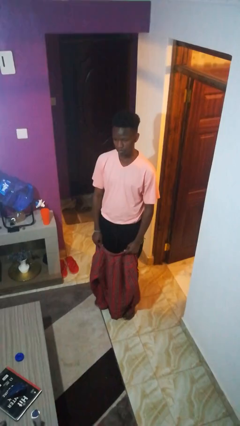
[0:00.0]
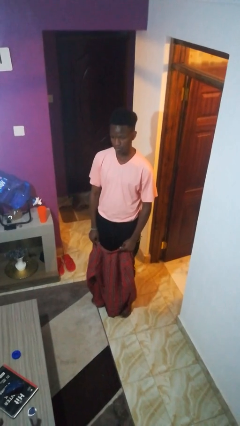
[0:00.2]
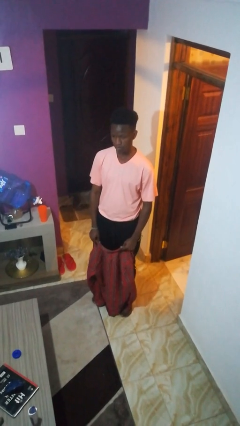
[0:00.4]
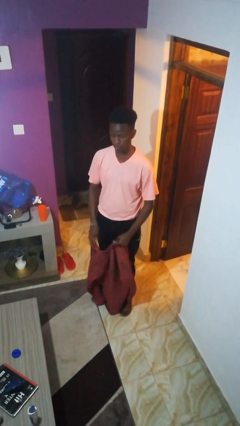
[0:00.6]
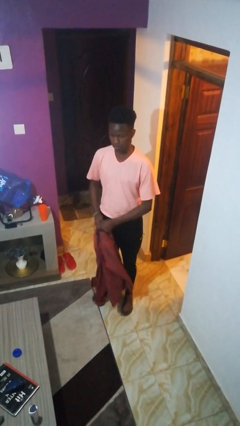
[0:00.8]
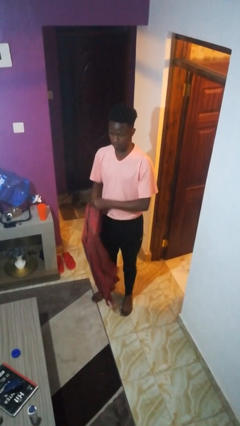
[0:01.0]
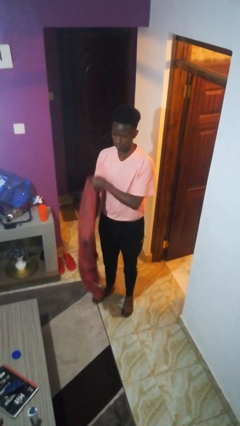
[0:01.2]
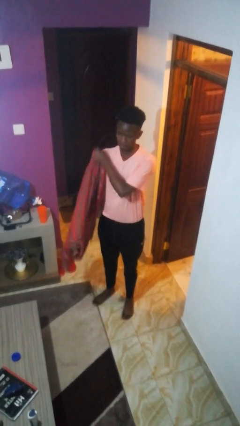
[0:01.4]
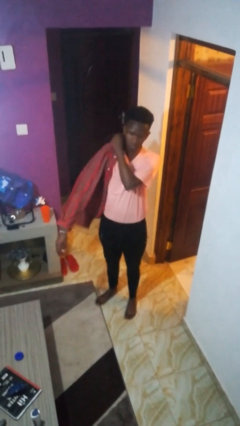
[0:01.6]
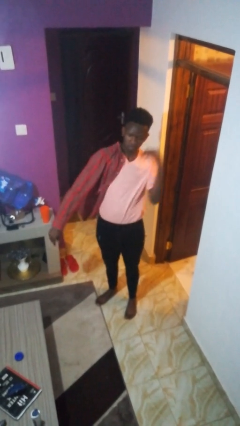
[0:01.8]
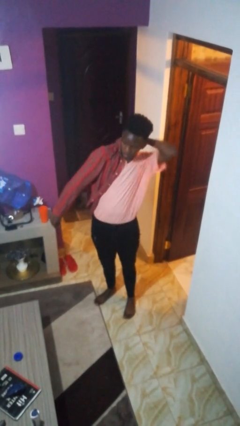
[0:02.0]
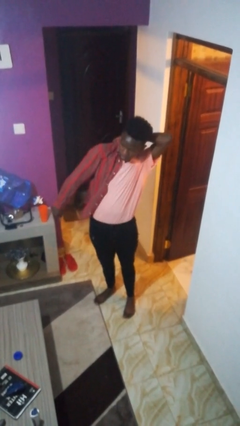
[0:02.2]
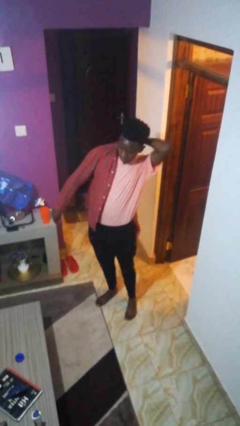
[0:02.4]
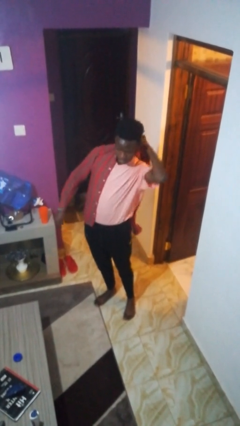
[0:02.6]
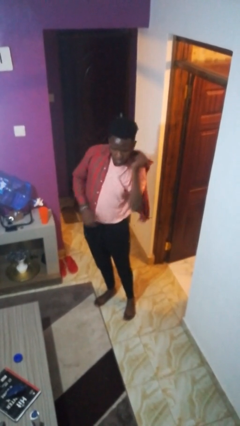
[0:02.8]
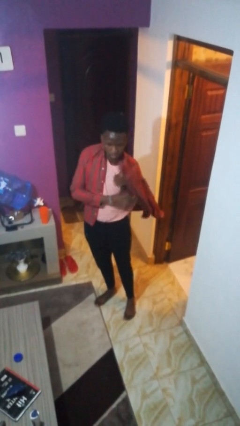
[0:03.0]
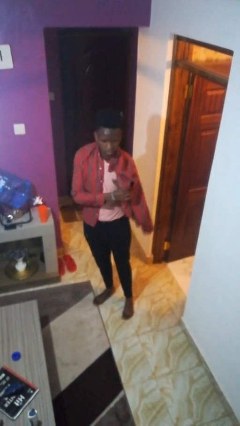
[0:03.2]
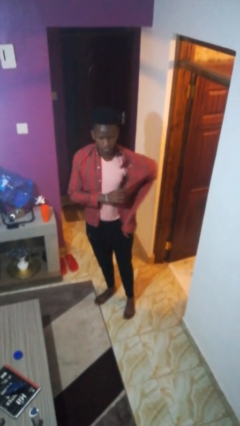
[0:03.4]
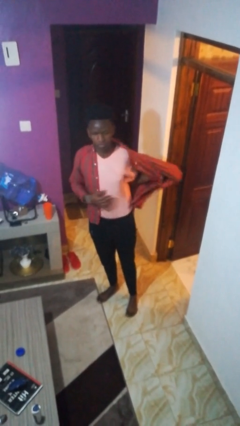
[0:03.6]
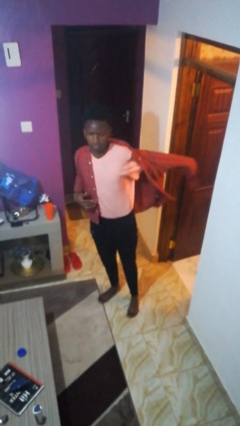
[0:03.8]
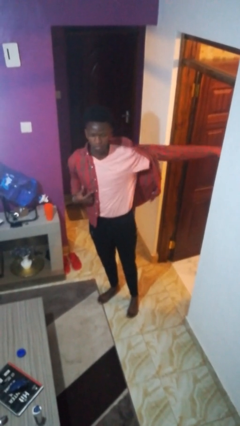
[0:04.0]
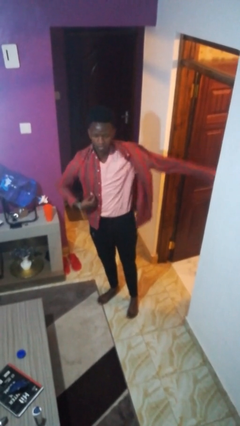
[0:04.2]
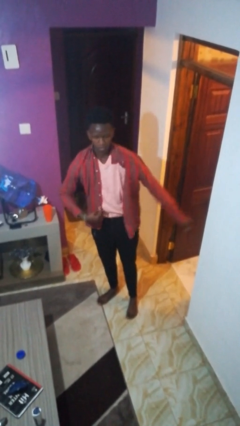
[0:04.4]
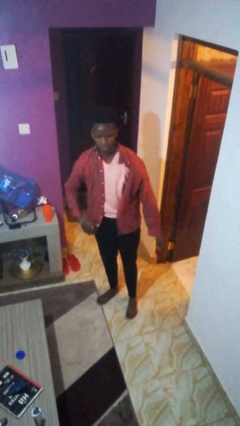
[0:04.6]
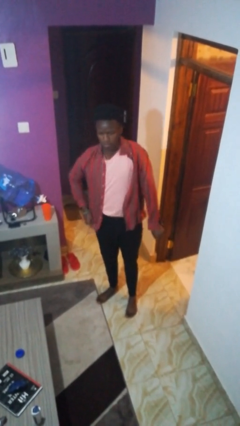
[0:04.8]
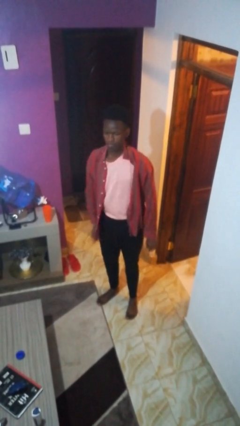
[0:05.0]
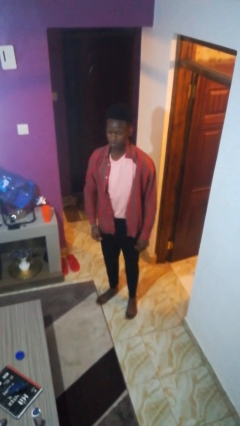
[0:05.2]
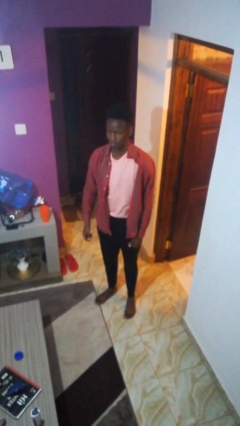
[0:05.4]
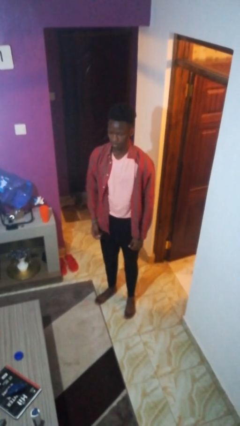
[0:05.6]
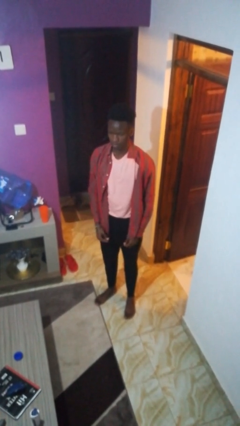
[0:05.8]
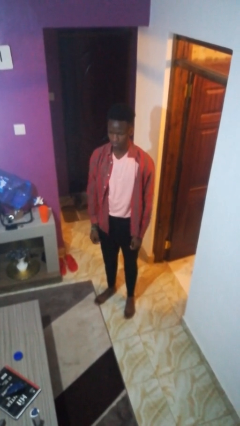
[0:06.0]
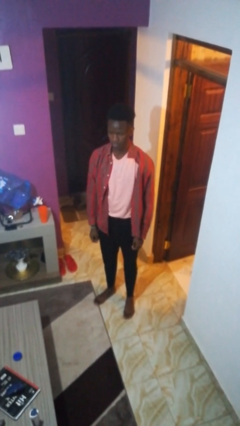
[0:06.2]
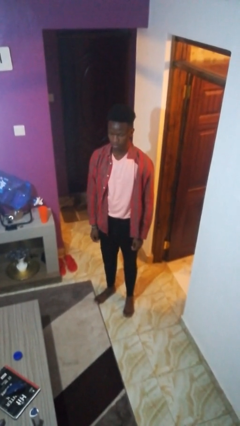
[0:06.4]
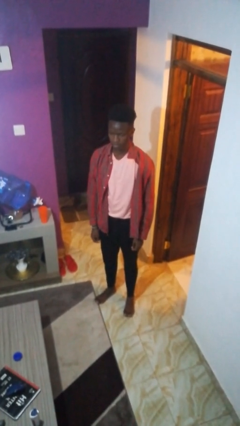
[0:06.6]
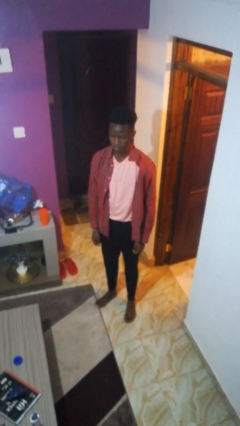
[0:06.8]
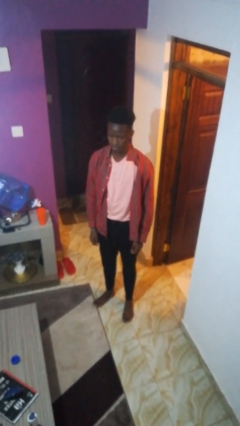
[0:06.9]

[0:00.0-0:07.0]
person puts on shirt

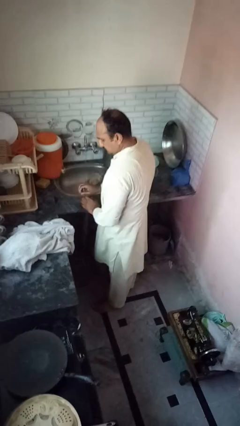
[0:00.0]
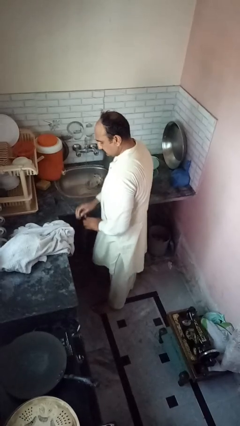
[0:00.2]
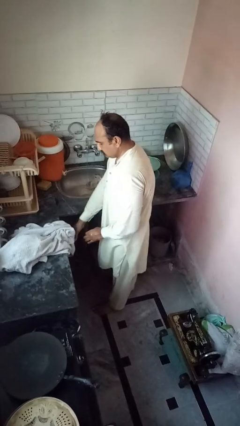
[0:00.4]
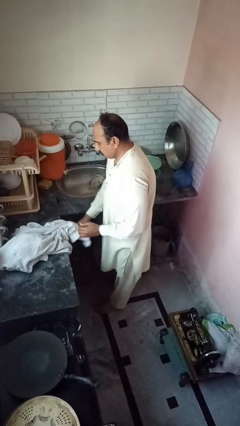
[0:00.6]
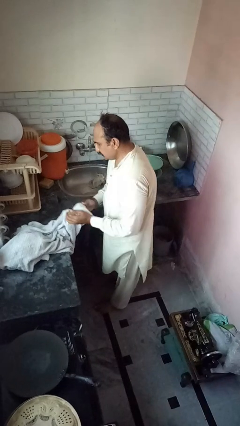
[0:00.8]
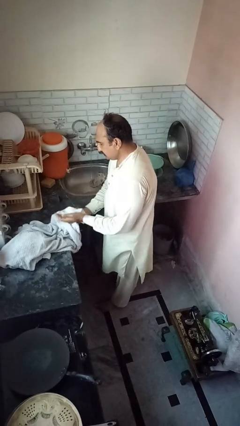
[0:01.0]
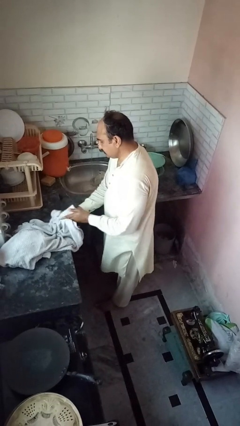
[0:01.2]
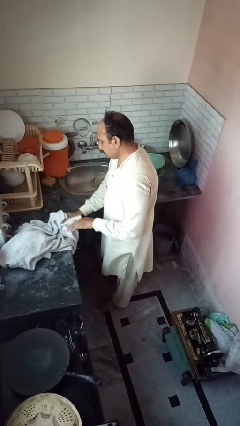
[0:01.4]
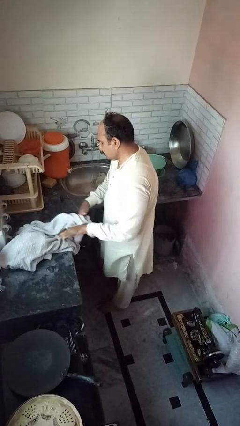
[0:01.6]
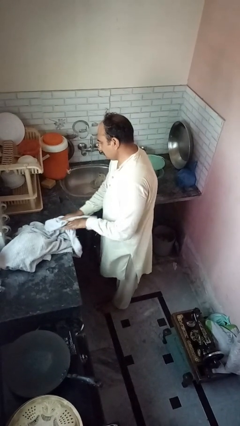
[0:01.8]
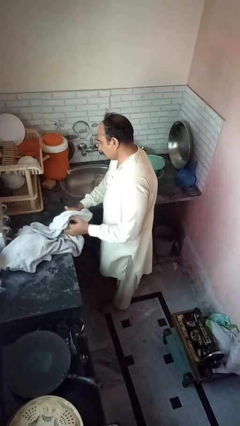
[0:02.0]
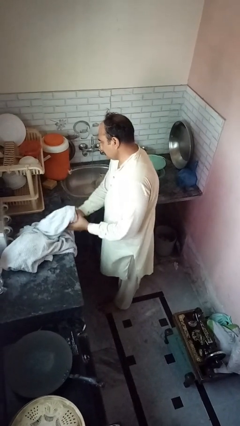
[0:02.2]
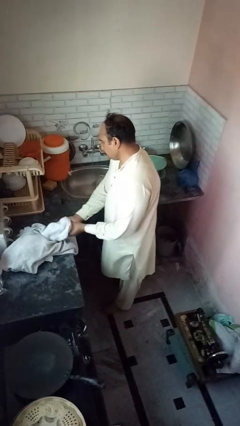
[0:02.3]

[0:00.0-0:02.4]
person dries hands with towel

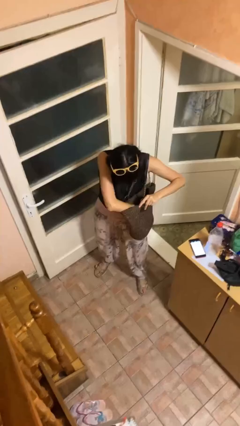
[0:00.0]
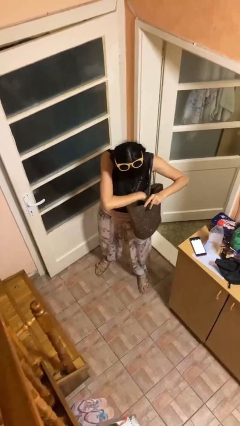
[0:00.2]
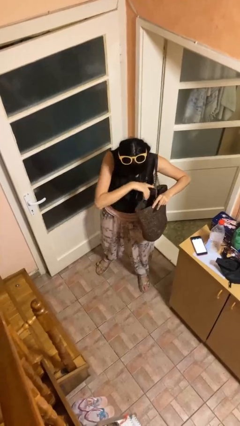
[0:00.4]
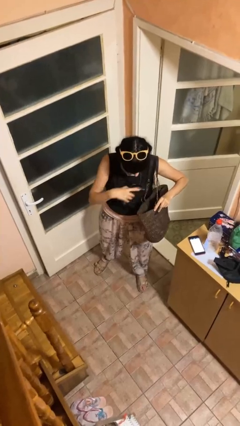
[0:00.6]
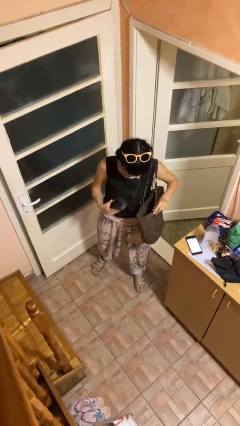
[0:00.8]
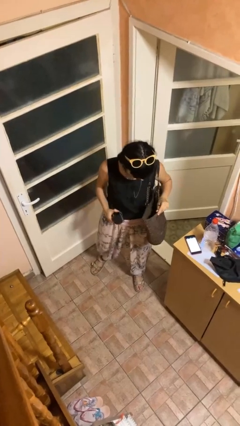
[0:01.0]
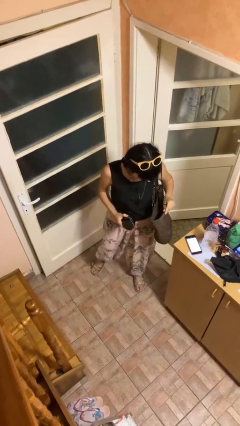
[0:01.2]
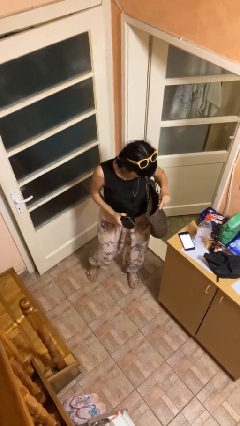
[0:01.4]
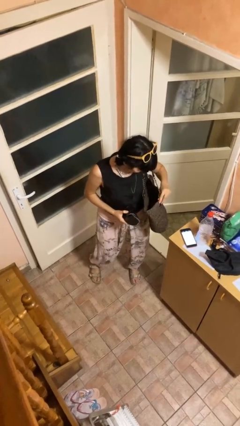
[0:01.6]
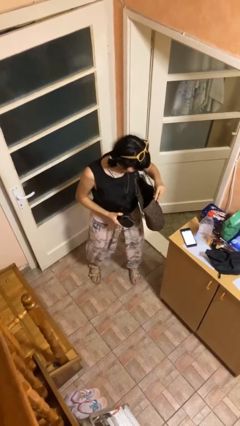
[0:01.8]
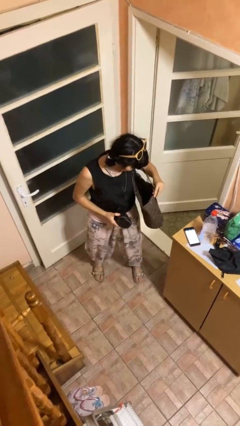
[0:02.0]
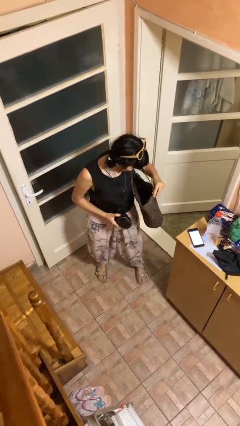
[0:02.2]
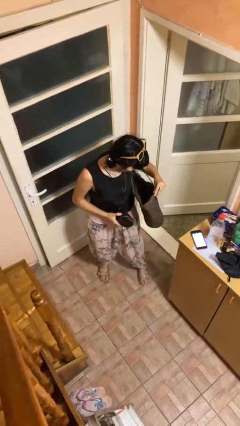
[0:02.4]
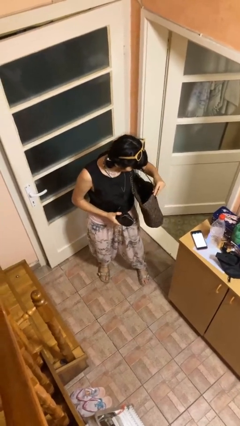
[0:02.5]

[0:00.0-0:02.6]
person takes object from purse

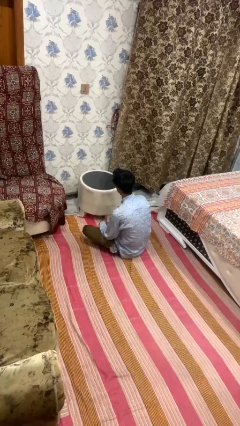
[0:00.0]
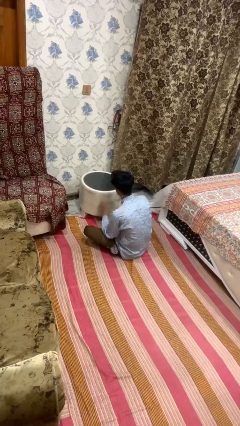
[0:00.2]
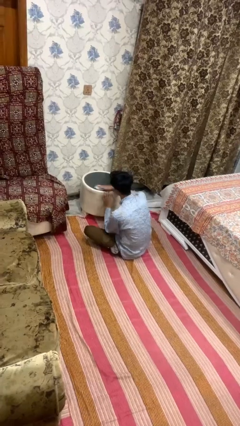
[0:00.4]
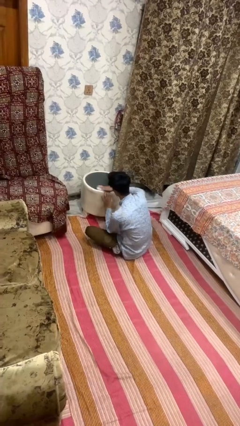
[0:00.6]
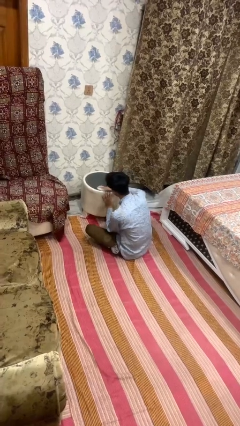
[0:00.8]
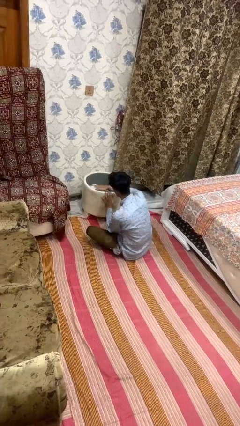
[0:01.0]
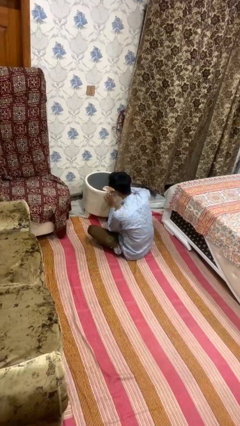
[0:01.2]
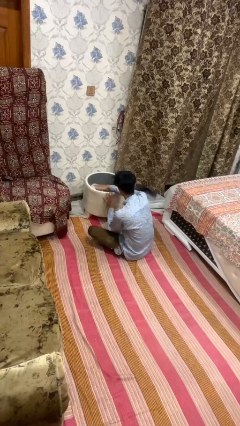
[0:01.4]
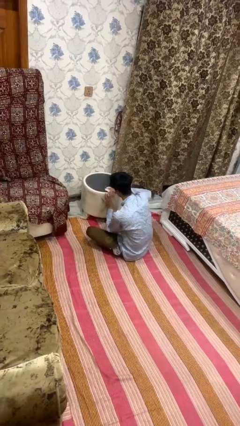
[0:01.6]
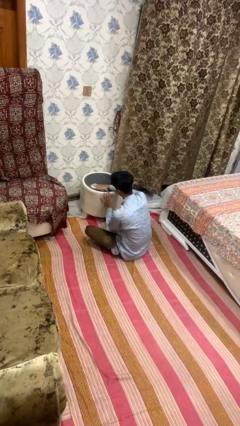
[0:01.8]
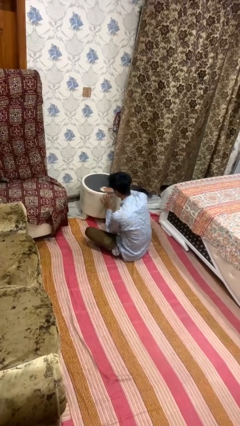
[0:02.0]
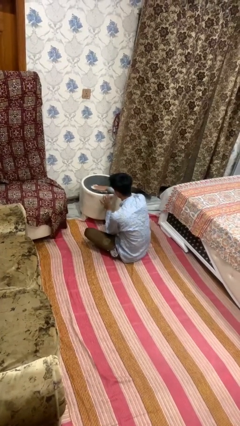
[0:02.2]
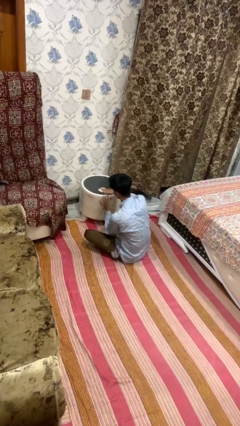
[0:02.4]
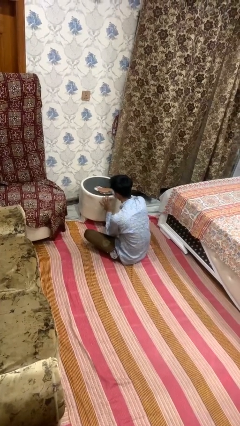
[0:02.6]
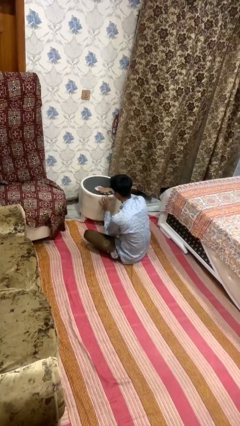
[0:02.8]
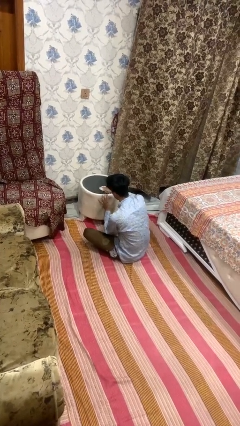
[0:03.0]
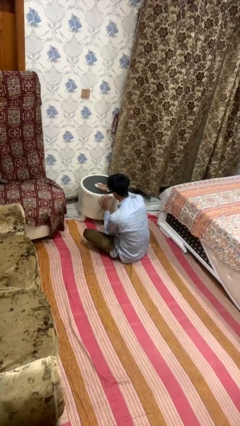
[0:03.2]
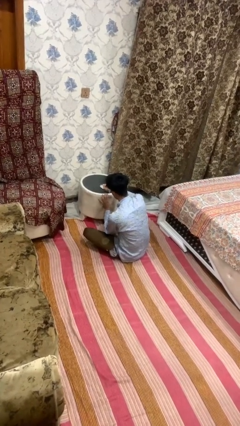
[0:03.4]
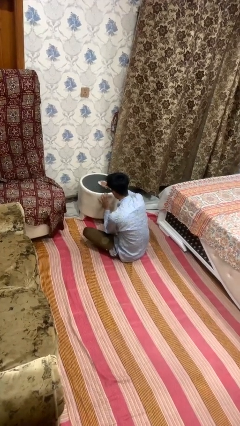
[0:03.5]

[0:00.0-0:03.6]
person cleans table with rag

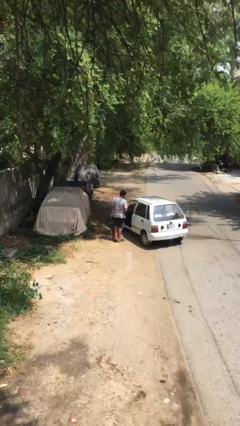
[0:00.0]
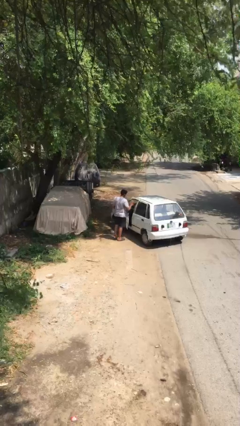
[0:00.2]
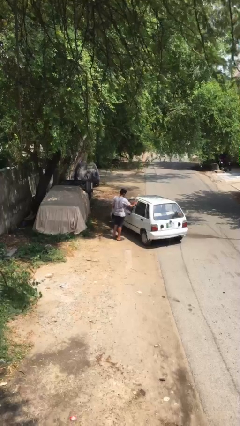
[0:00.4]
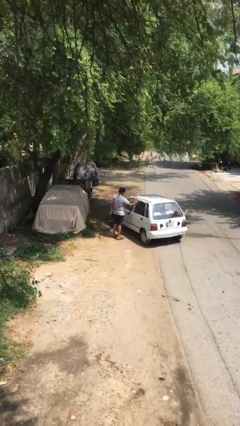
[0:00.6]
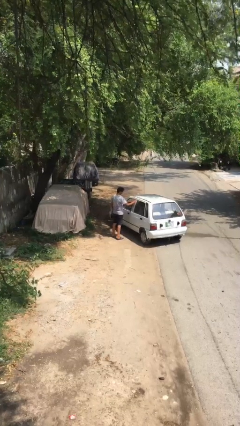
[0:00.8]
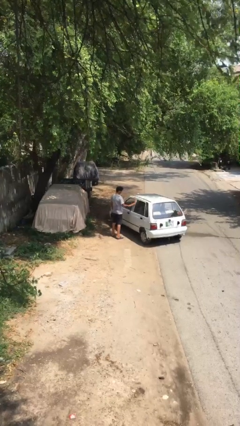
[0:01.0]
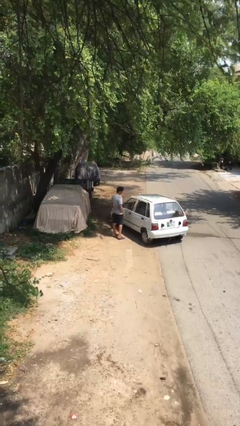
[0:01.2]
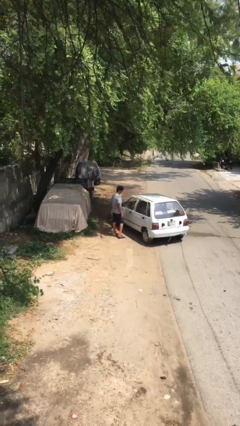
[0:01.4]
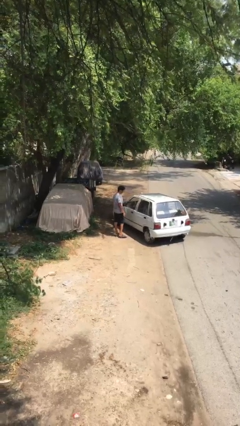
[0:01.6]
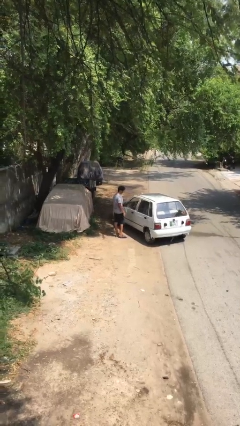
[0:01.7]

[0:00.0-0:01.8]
person closes car door

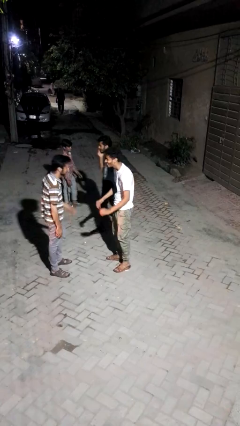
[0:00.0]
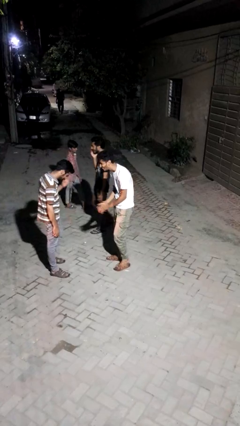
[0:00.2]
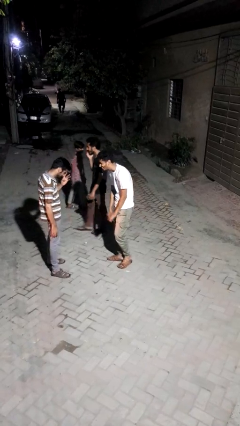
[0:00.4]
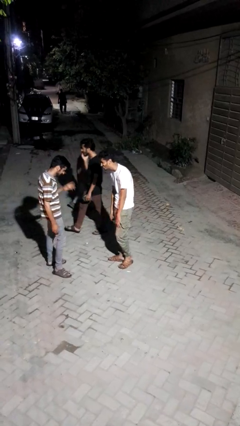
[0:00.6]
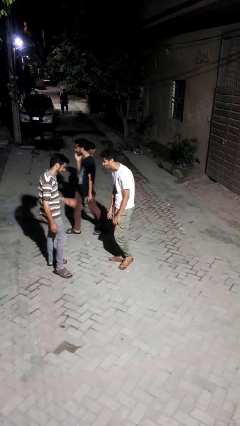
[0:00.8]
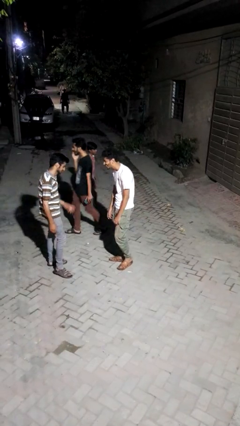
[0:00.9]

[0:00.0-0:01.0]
person laughs with person
